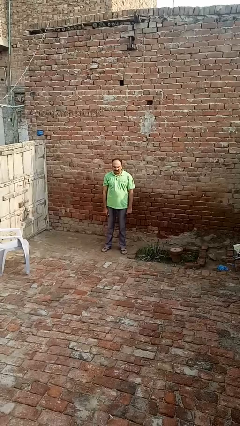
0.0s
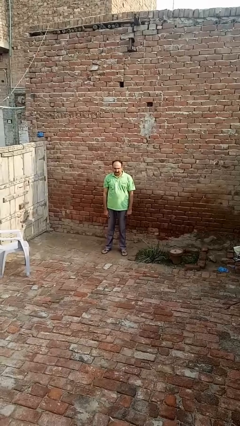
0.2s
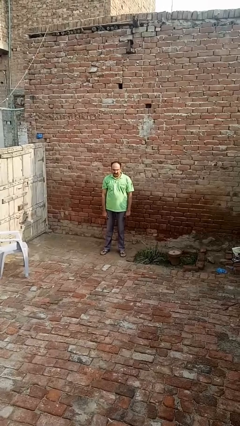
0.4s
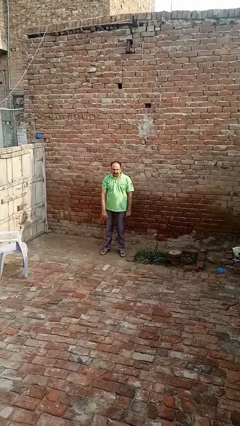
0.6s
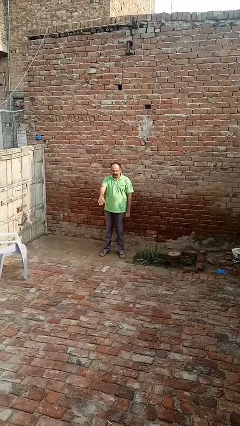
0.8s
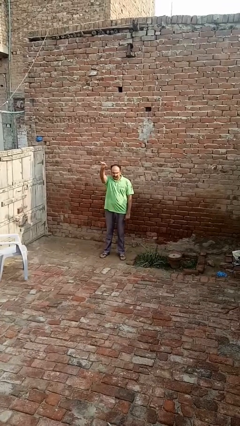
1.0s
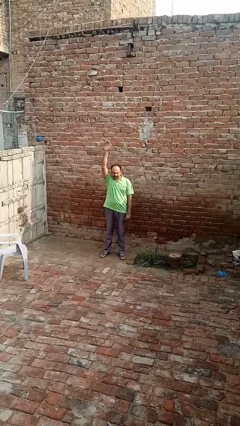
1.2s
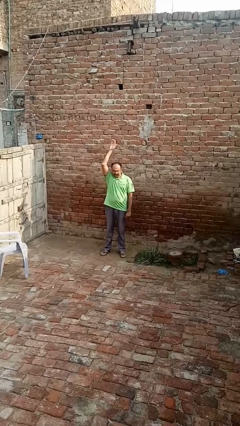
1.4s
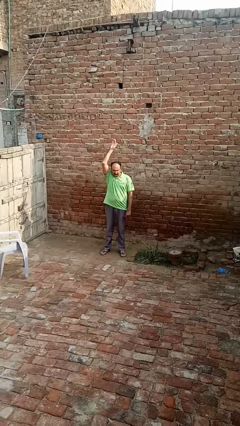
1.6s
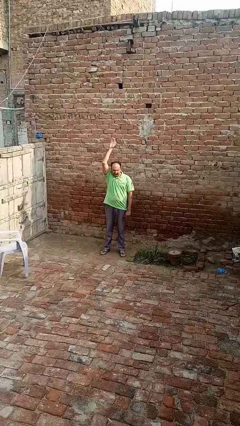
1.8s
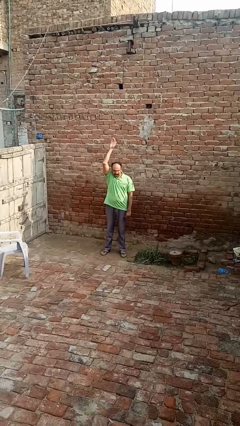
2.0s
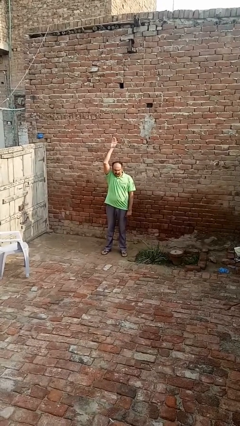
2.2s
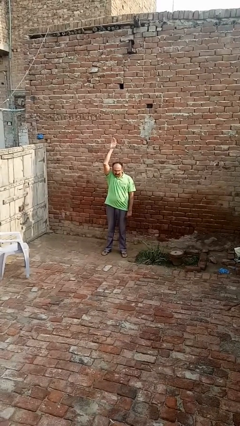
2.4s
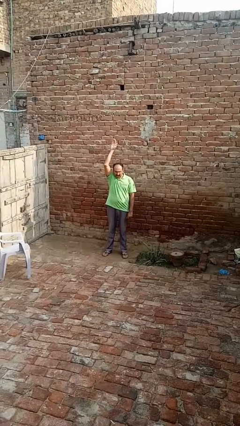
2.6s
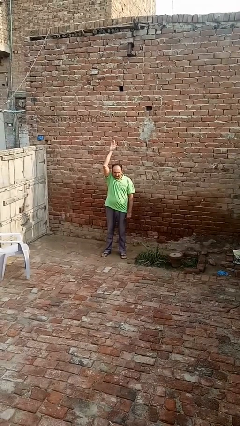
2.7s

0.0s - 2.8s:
person gestures swipe up

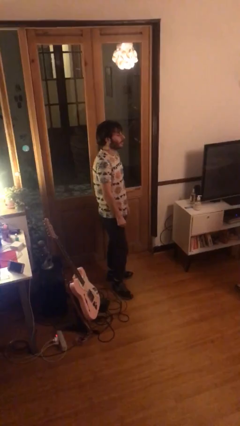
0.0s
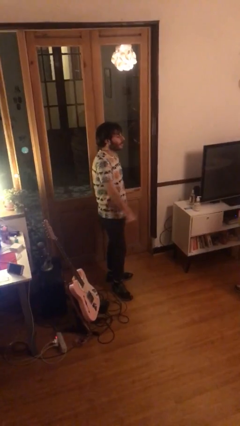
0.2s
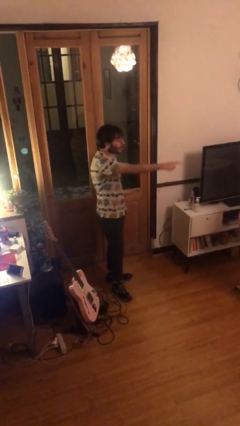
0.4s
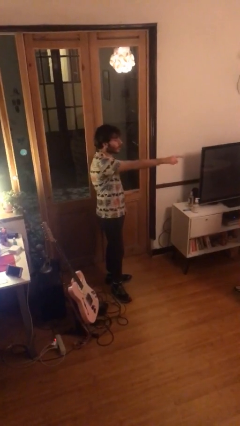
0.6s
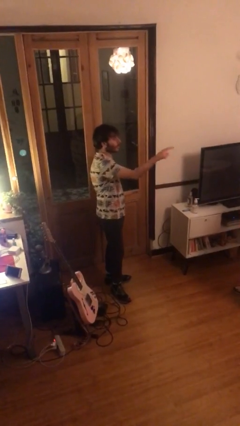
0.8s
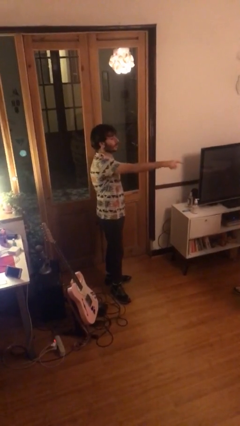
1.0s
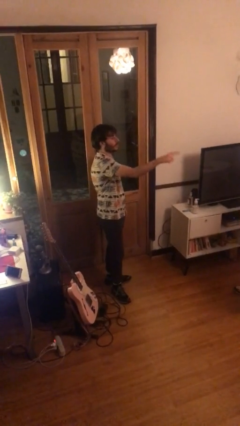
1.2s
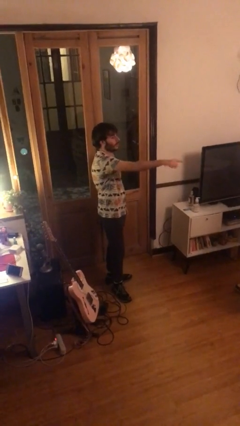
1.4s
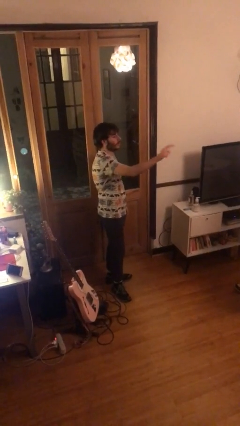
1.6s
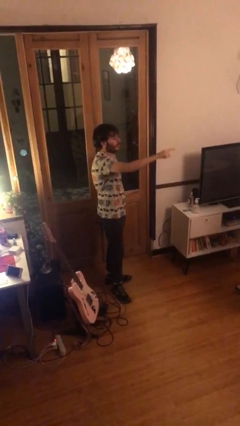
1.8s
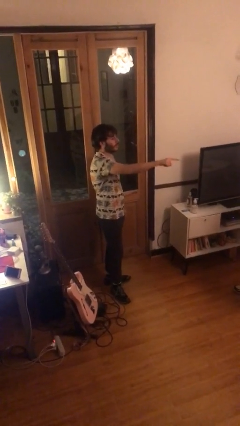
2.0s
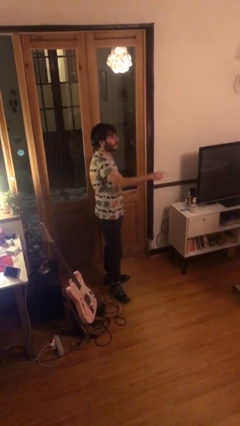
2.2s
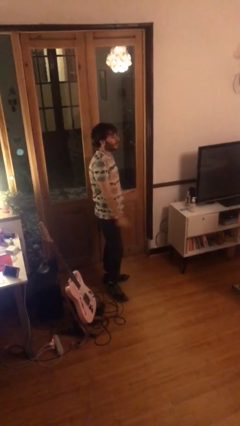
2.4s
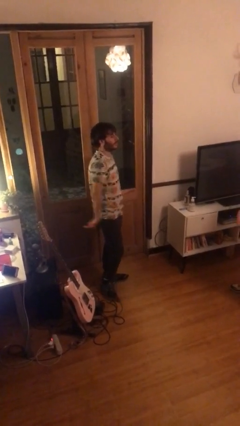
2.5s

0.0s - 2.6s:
person points at person

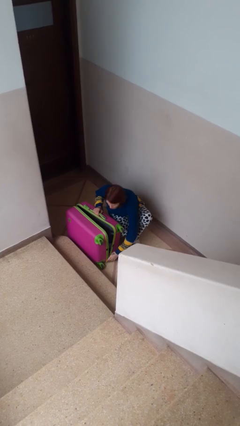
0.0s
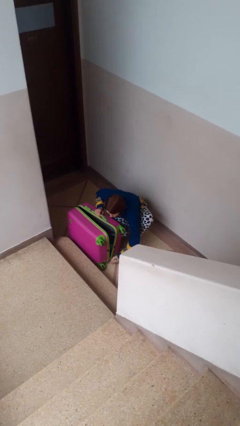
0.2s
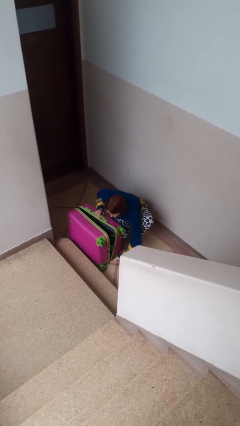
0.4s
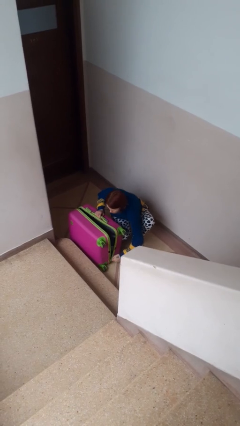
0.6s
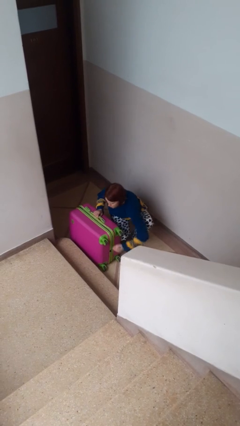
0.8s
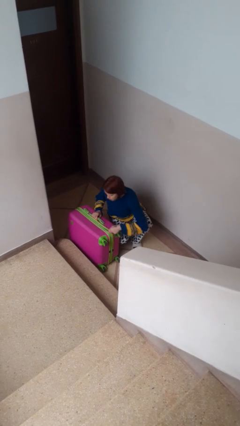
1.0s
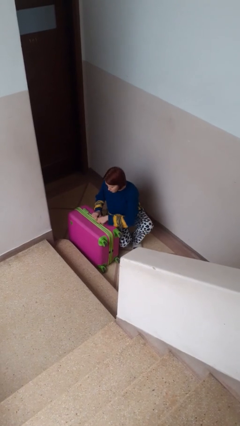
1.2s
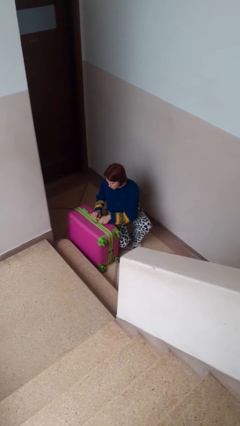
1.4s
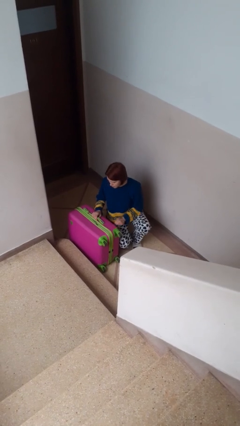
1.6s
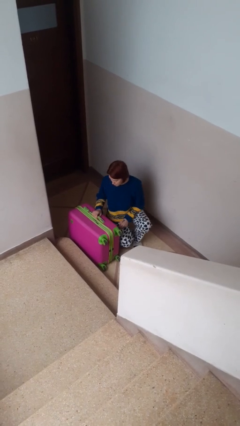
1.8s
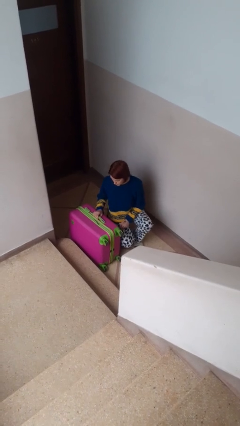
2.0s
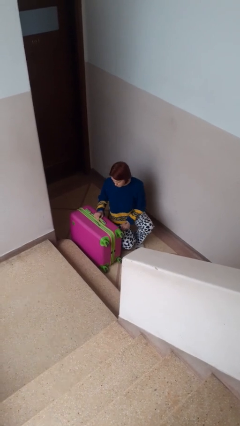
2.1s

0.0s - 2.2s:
person closes suitcase

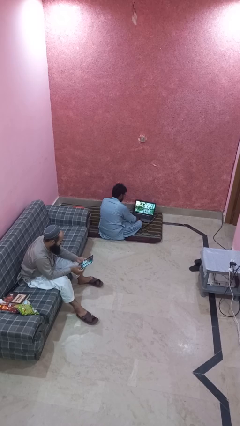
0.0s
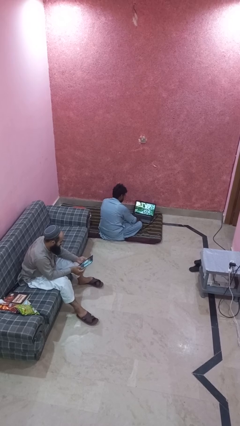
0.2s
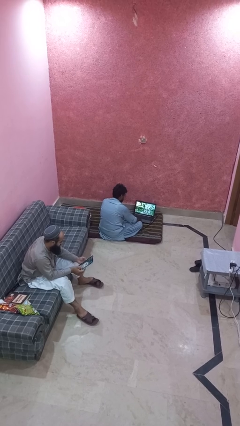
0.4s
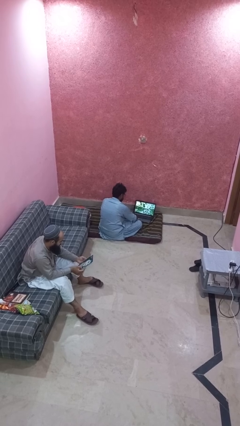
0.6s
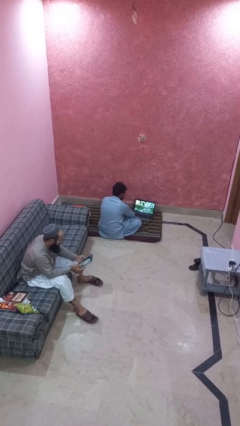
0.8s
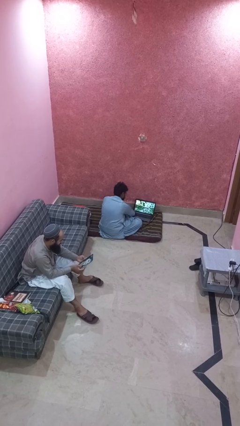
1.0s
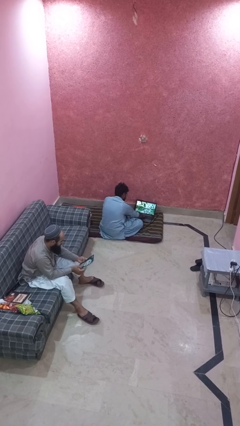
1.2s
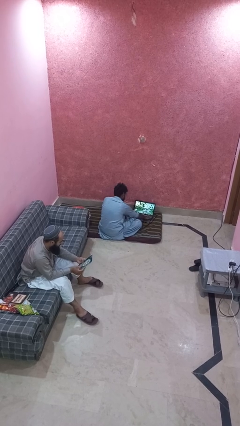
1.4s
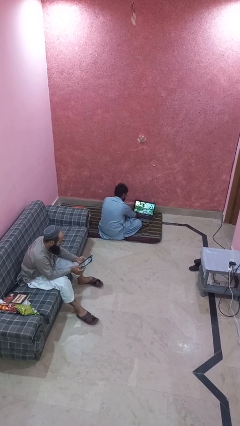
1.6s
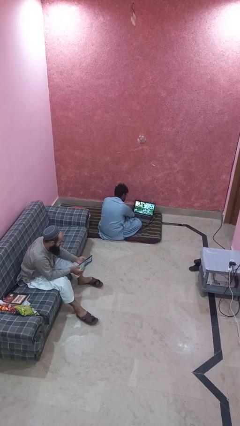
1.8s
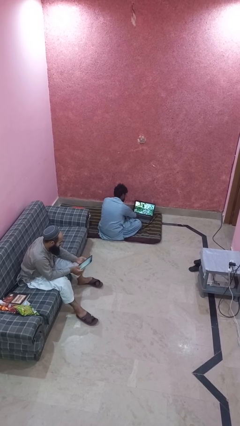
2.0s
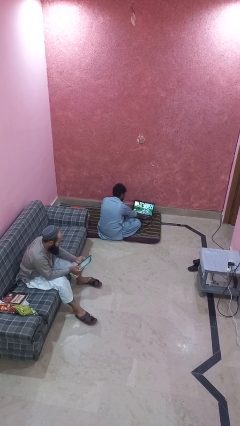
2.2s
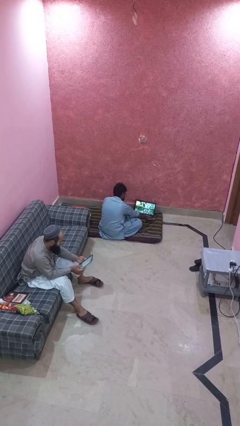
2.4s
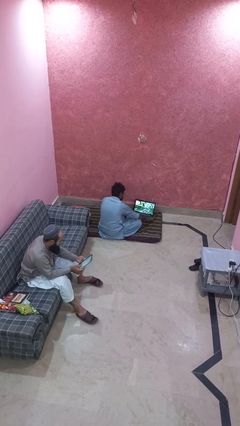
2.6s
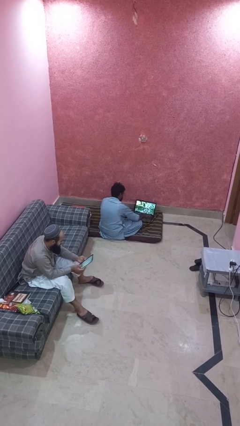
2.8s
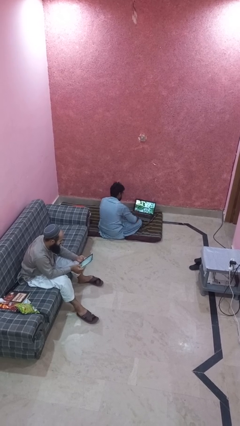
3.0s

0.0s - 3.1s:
person waves hand over object

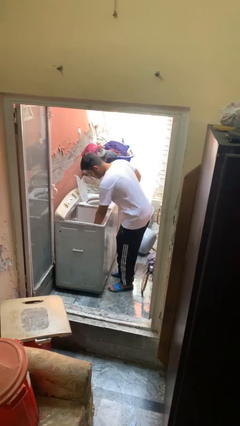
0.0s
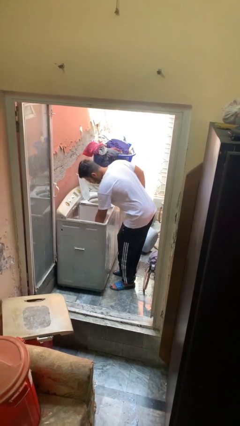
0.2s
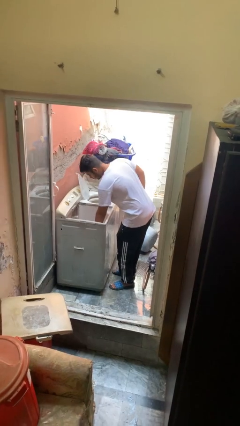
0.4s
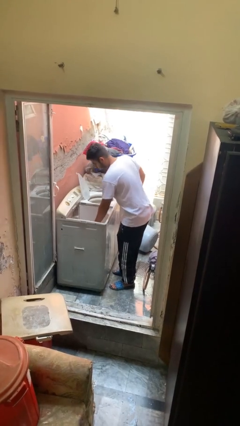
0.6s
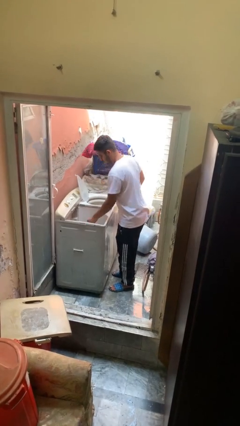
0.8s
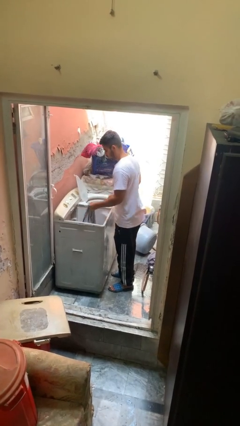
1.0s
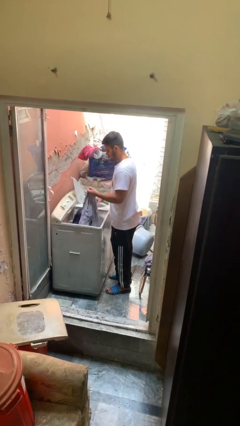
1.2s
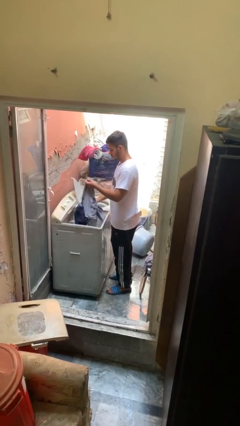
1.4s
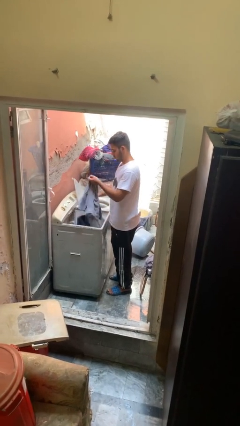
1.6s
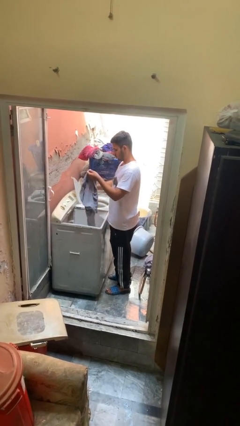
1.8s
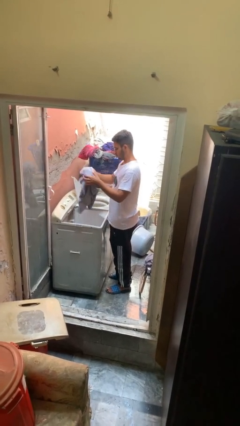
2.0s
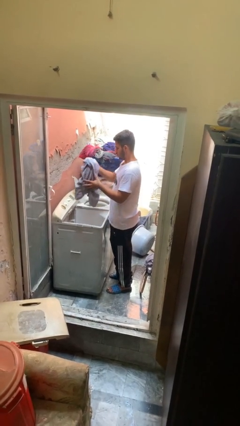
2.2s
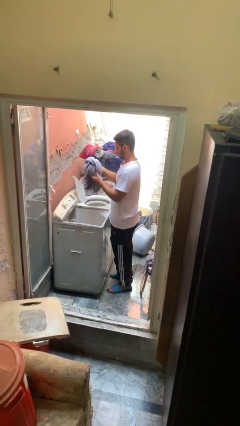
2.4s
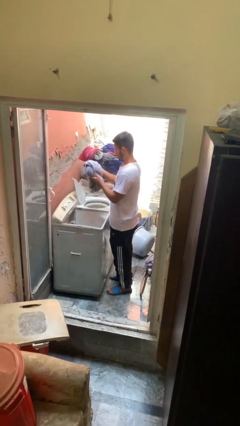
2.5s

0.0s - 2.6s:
person unloads clotheswasher

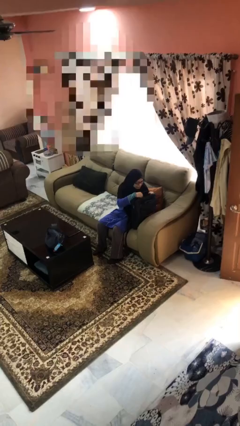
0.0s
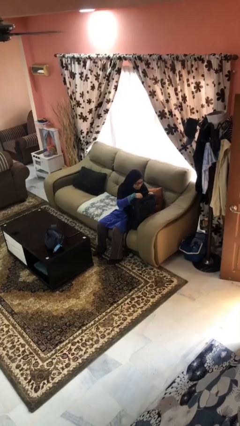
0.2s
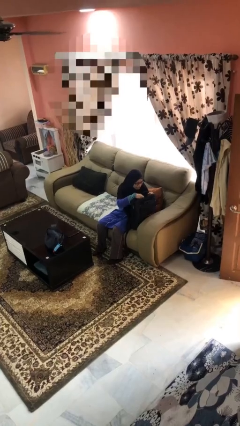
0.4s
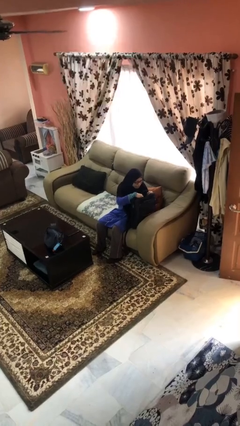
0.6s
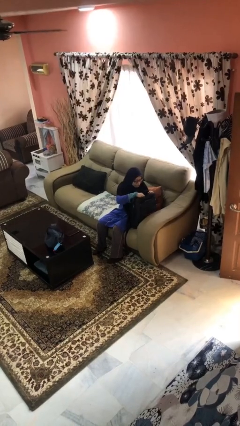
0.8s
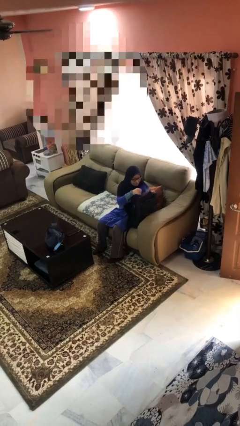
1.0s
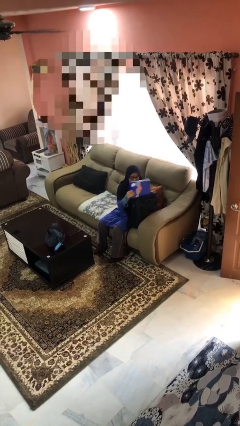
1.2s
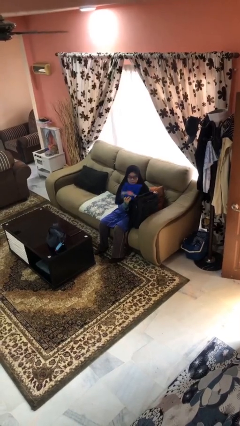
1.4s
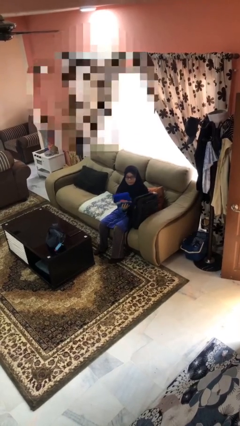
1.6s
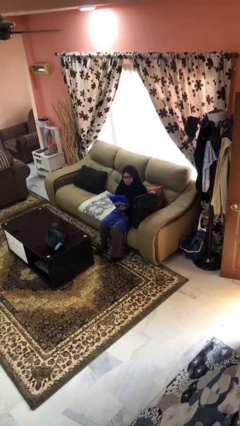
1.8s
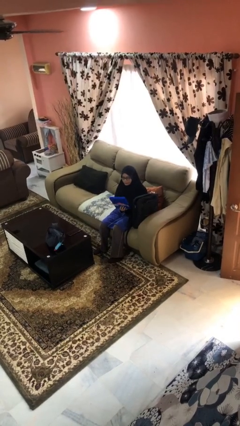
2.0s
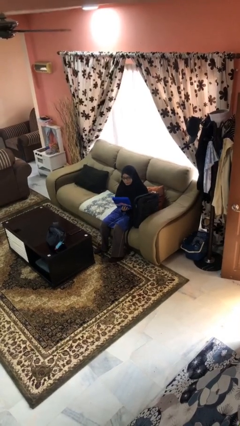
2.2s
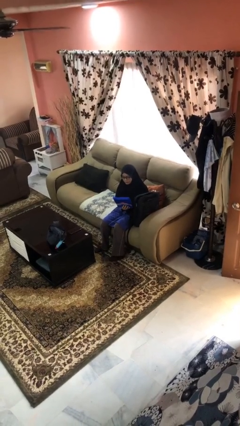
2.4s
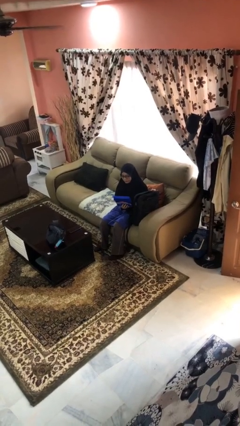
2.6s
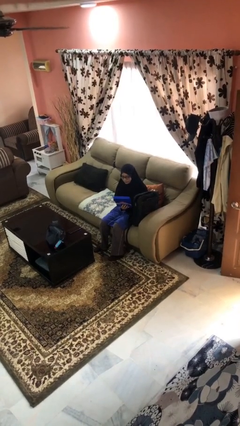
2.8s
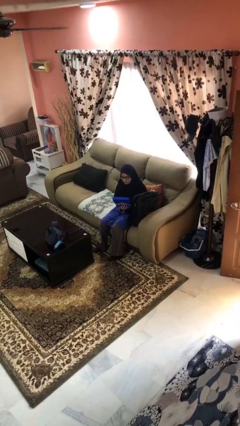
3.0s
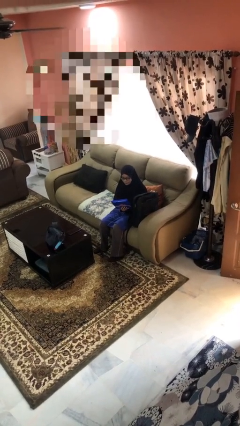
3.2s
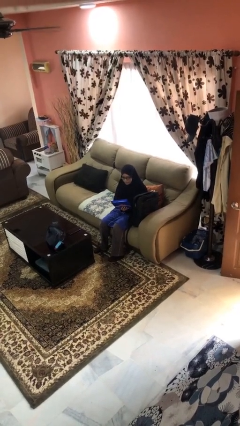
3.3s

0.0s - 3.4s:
person takes object from backpack

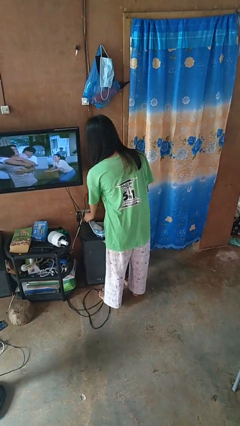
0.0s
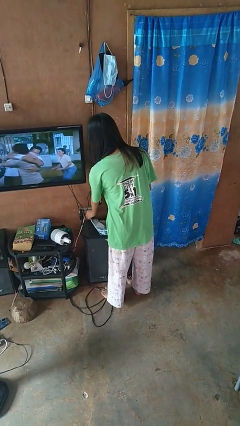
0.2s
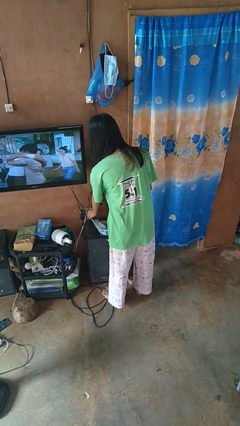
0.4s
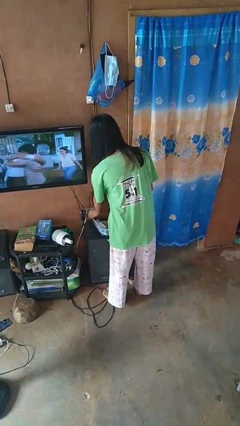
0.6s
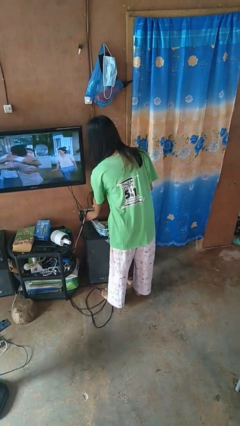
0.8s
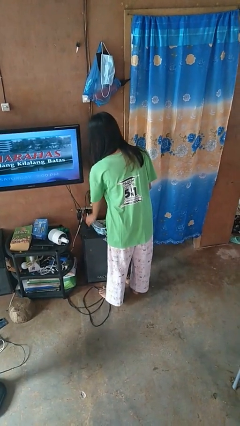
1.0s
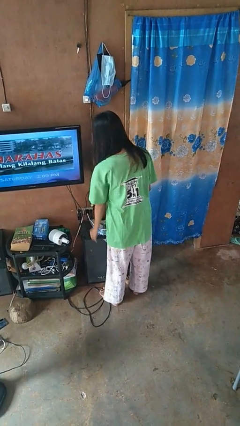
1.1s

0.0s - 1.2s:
person plugs into electrical socket
